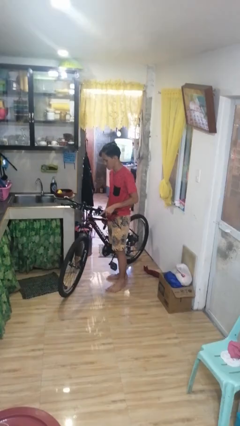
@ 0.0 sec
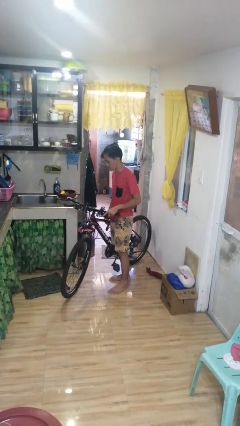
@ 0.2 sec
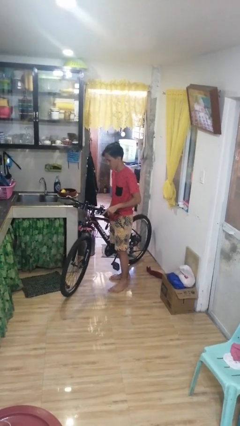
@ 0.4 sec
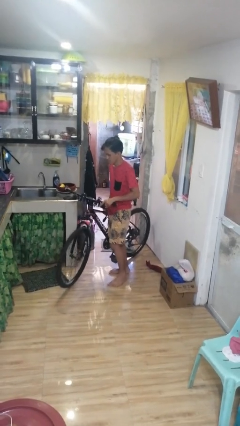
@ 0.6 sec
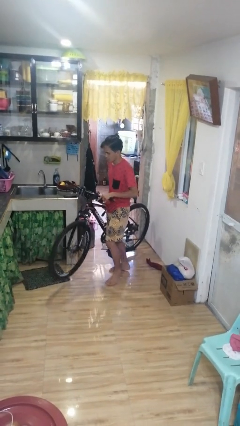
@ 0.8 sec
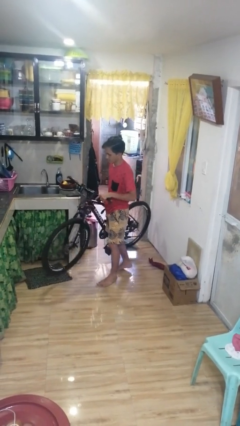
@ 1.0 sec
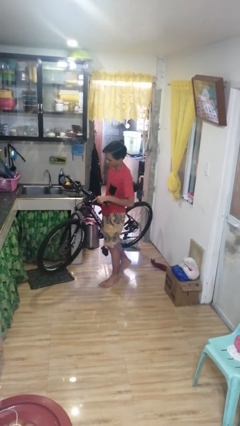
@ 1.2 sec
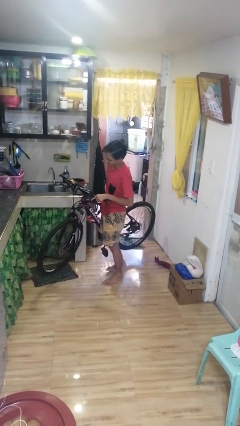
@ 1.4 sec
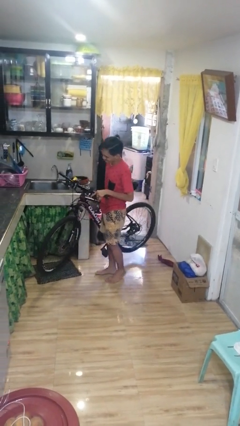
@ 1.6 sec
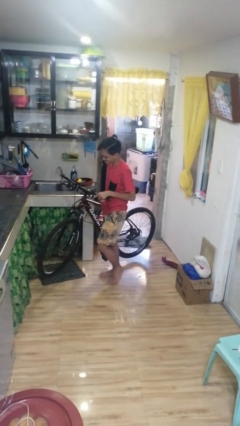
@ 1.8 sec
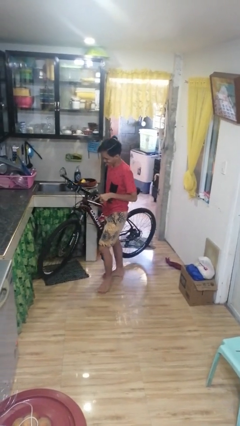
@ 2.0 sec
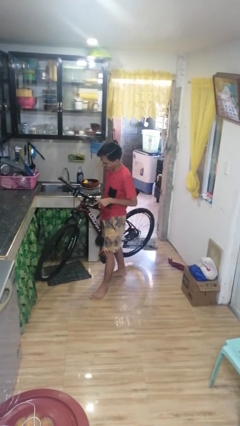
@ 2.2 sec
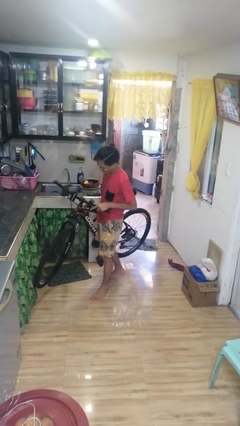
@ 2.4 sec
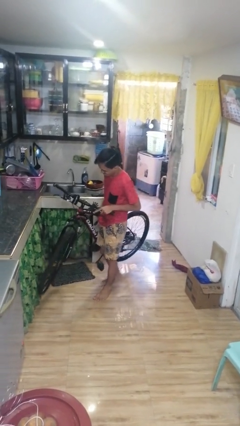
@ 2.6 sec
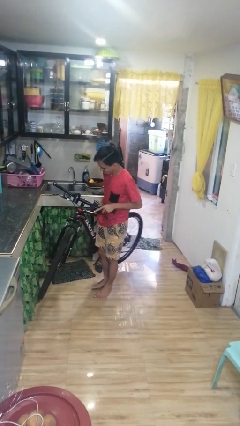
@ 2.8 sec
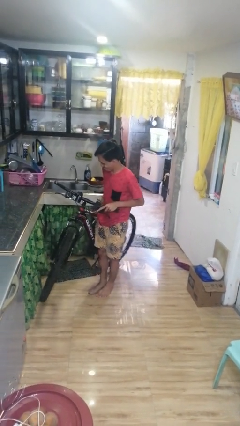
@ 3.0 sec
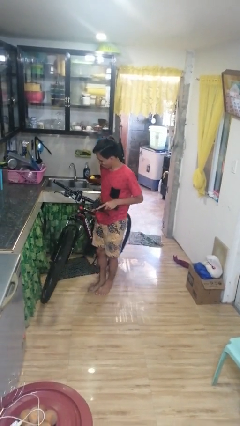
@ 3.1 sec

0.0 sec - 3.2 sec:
person carries bicycle

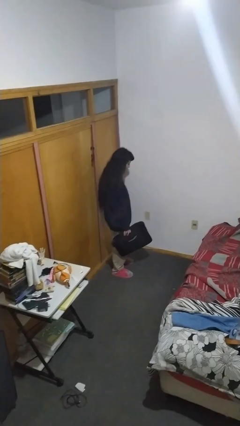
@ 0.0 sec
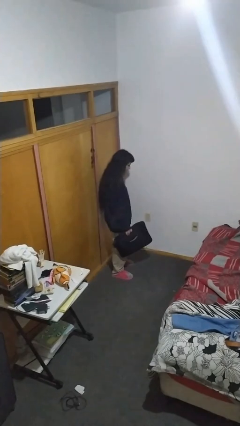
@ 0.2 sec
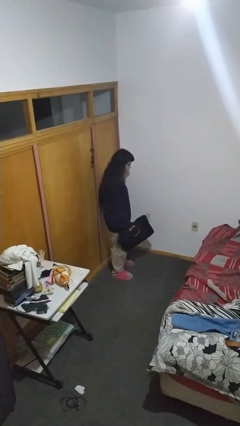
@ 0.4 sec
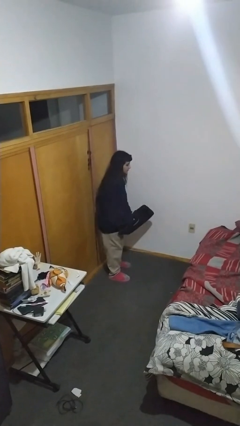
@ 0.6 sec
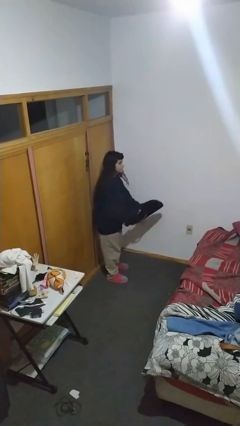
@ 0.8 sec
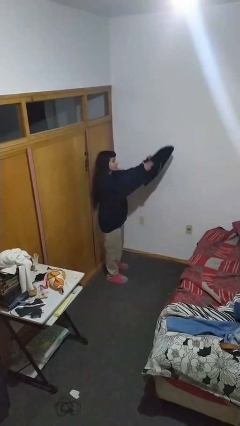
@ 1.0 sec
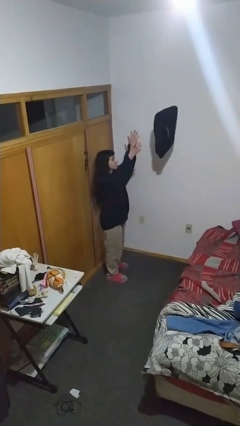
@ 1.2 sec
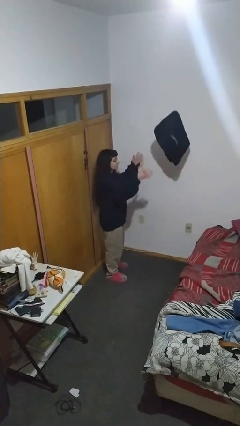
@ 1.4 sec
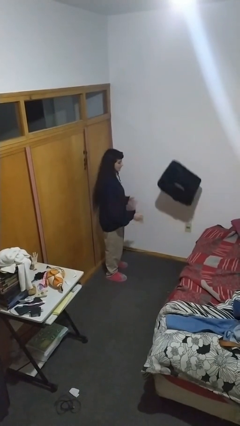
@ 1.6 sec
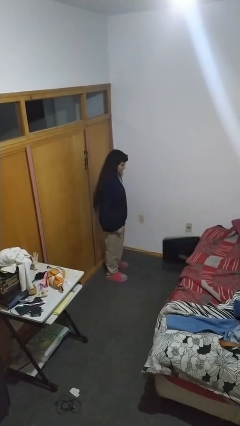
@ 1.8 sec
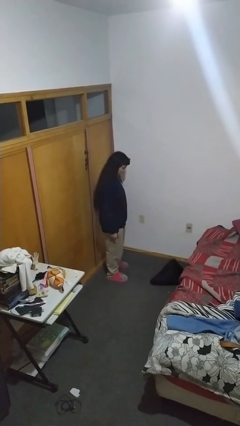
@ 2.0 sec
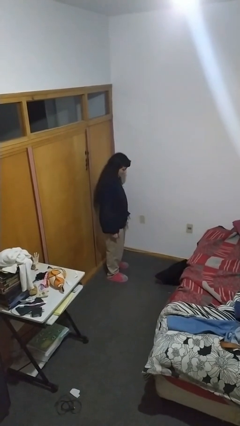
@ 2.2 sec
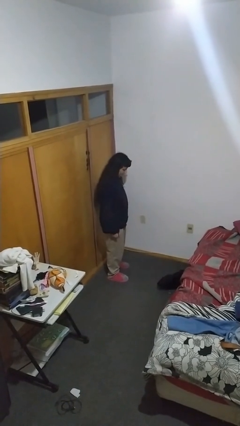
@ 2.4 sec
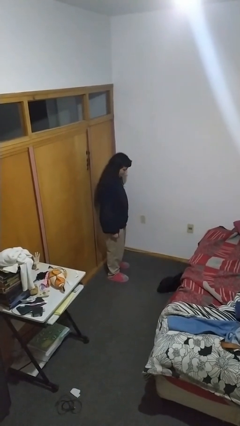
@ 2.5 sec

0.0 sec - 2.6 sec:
person throws object into air

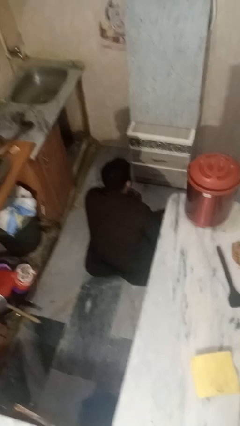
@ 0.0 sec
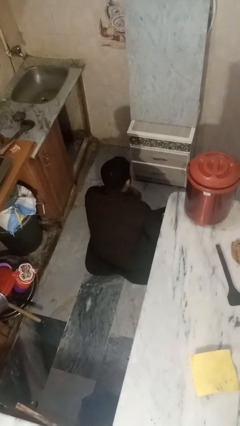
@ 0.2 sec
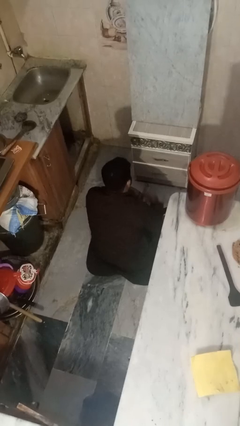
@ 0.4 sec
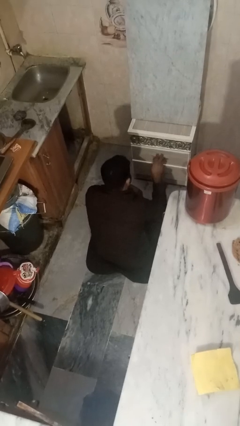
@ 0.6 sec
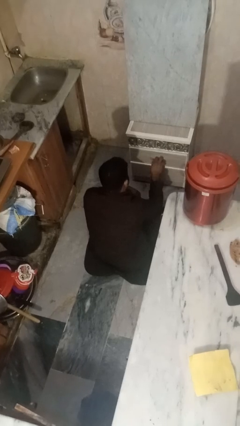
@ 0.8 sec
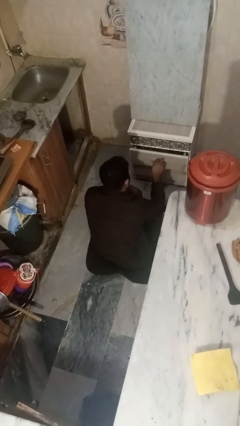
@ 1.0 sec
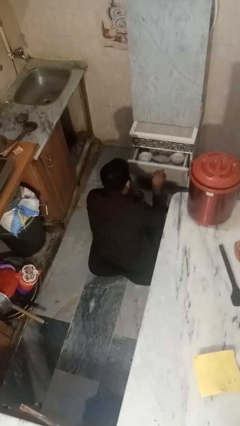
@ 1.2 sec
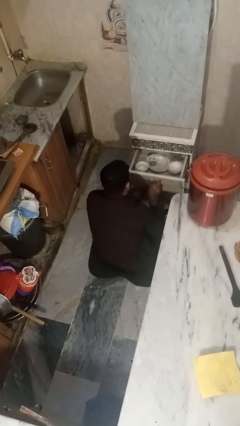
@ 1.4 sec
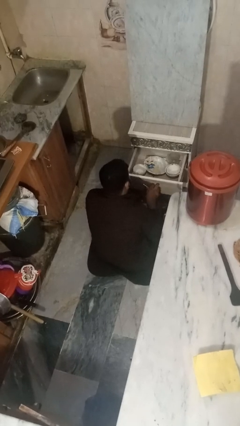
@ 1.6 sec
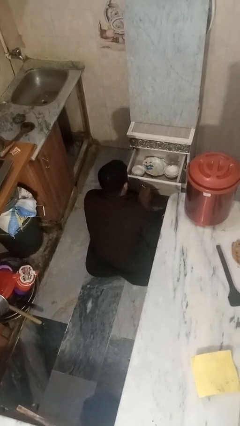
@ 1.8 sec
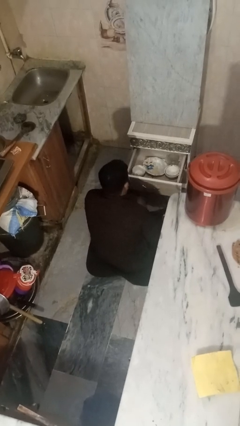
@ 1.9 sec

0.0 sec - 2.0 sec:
person opens kitchen drawer

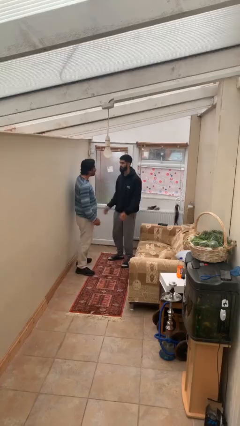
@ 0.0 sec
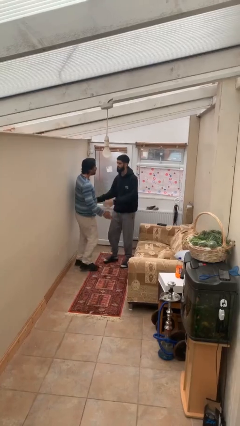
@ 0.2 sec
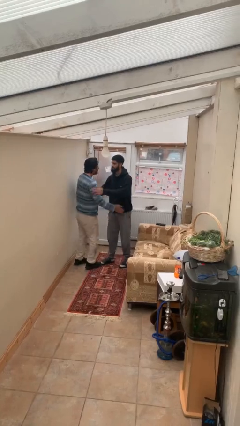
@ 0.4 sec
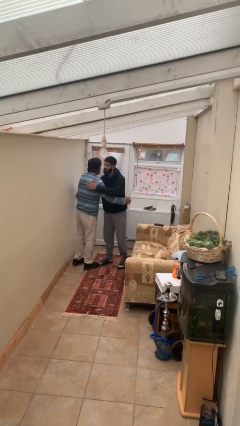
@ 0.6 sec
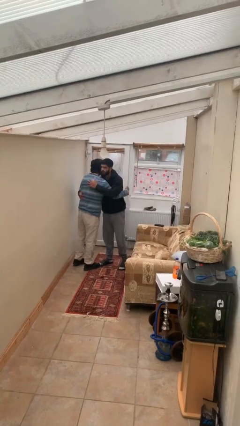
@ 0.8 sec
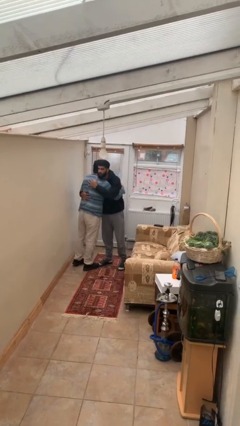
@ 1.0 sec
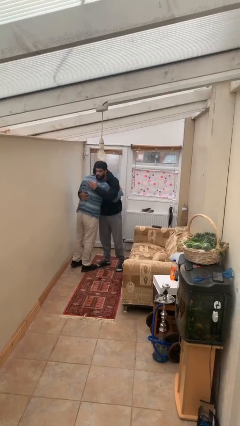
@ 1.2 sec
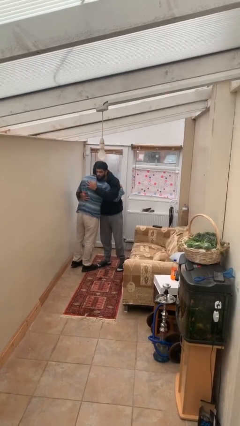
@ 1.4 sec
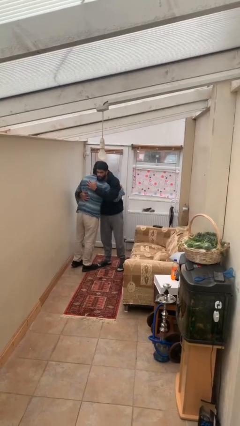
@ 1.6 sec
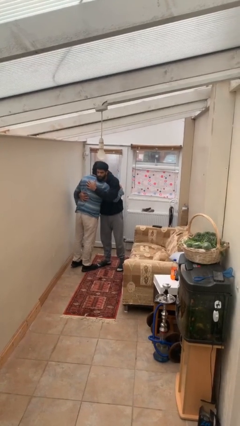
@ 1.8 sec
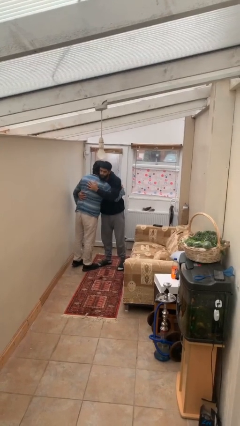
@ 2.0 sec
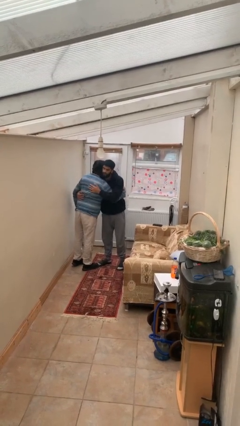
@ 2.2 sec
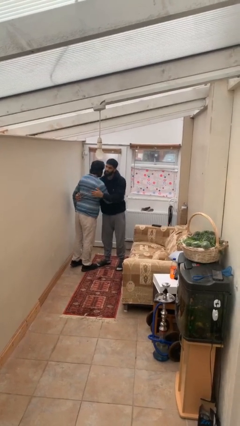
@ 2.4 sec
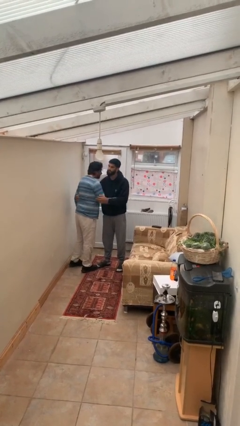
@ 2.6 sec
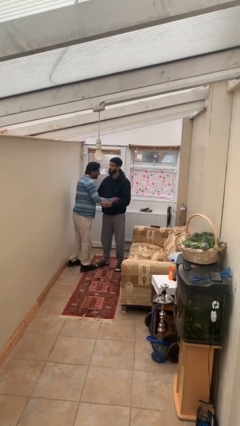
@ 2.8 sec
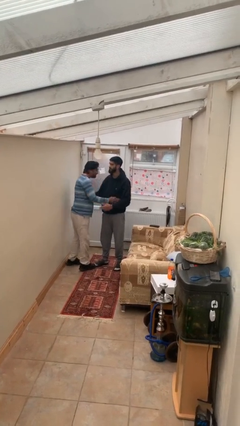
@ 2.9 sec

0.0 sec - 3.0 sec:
person embraces person

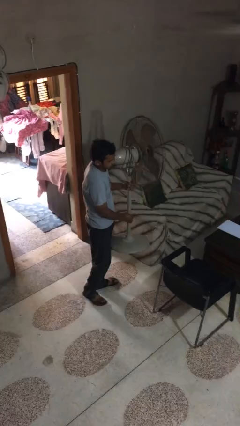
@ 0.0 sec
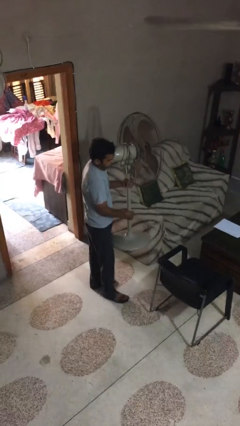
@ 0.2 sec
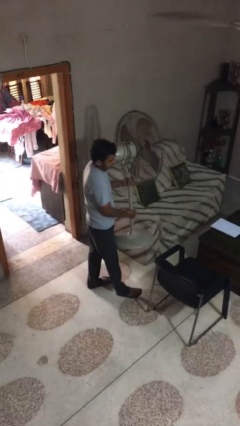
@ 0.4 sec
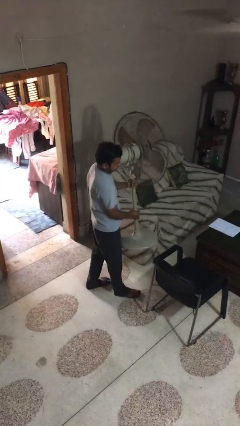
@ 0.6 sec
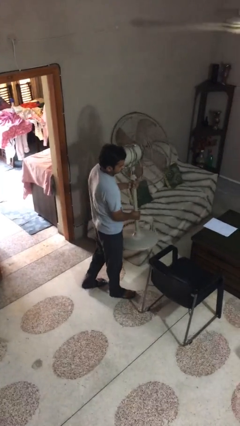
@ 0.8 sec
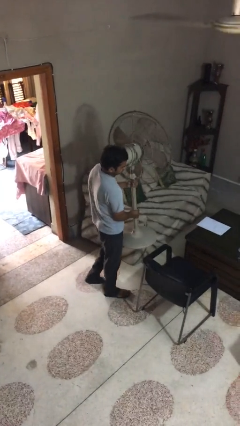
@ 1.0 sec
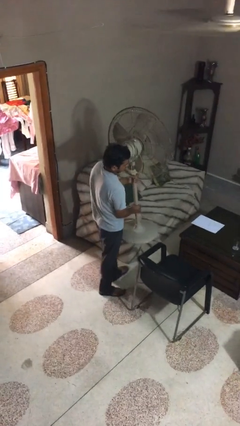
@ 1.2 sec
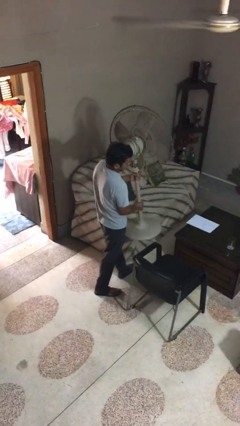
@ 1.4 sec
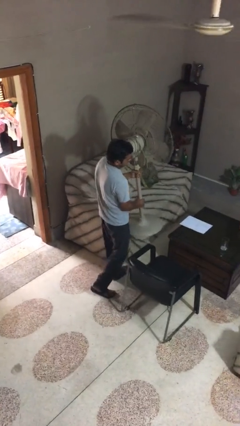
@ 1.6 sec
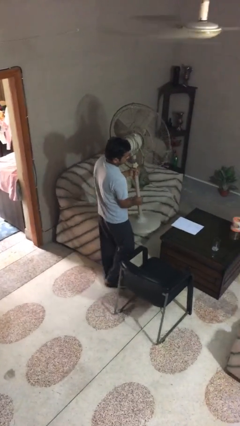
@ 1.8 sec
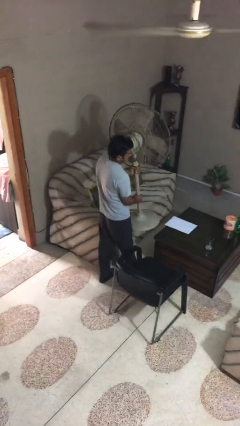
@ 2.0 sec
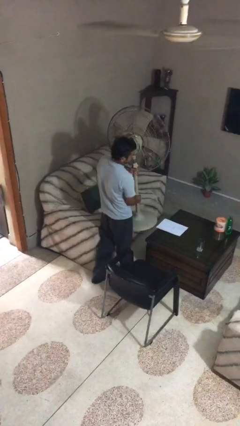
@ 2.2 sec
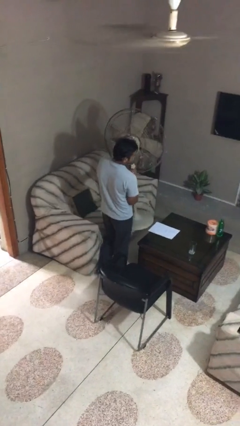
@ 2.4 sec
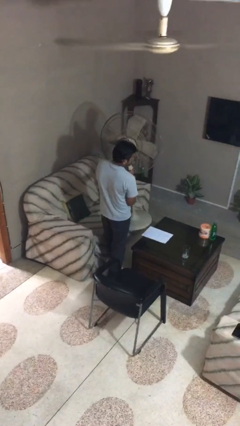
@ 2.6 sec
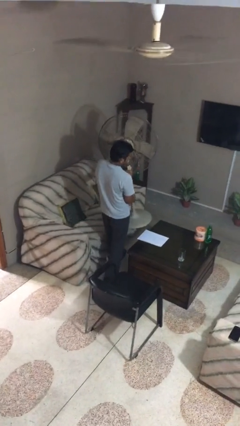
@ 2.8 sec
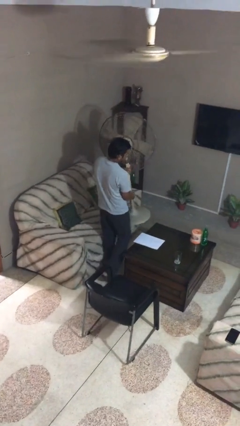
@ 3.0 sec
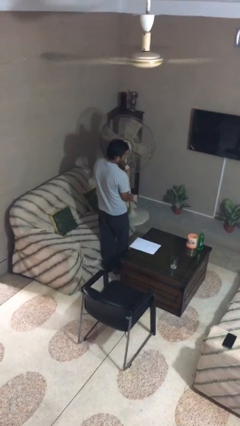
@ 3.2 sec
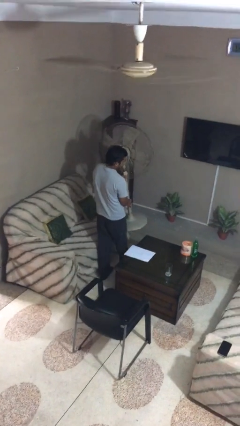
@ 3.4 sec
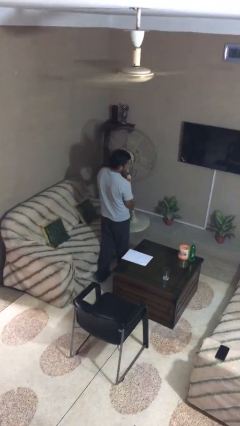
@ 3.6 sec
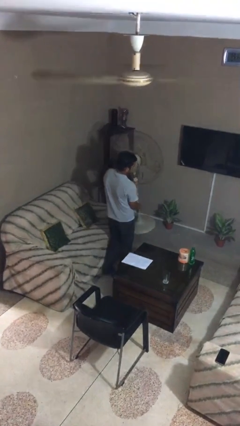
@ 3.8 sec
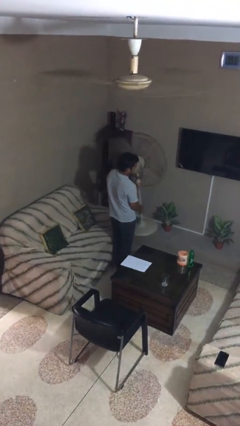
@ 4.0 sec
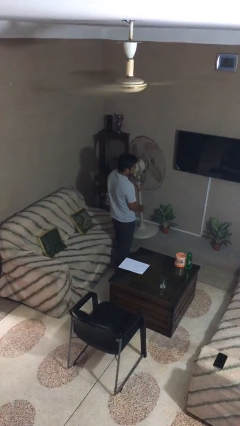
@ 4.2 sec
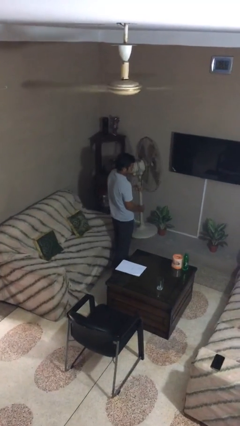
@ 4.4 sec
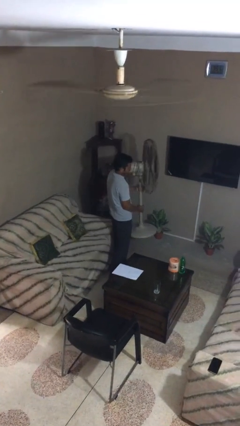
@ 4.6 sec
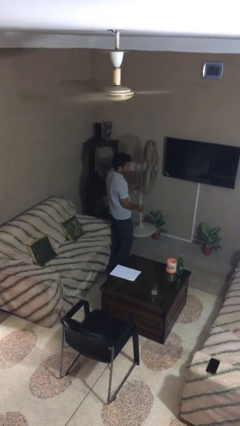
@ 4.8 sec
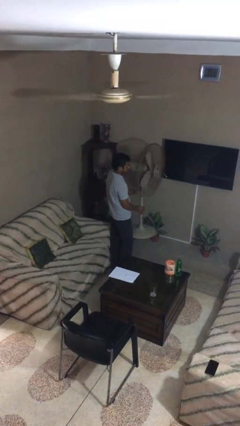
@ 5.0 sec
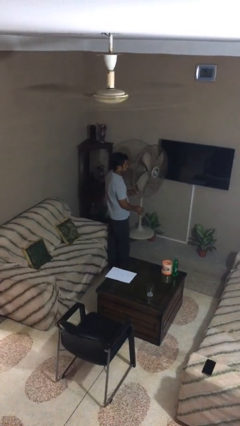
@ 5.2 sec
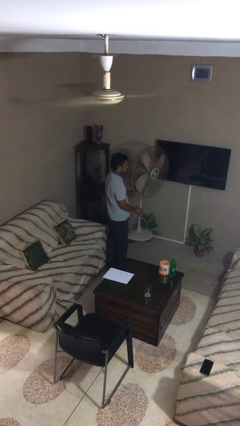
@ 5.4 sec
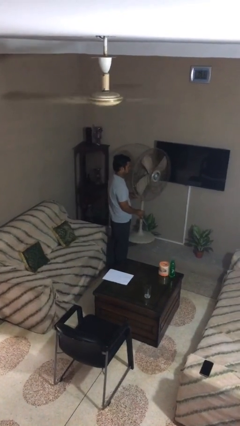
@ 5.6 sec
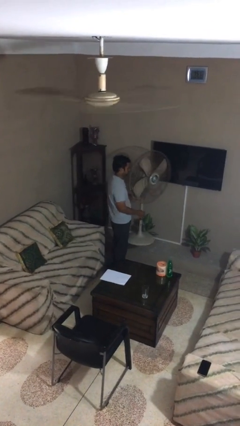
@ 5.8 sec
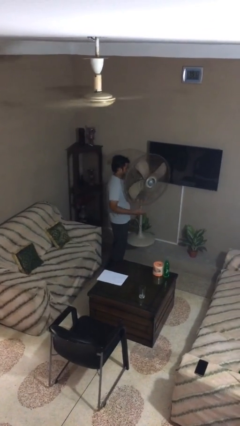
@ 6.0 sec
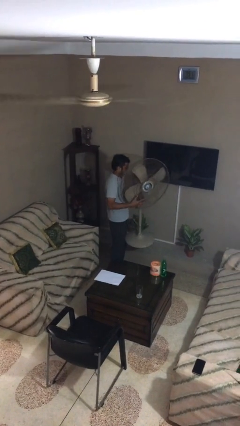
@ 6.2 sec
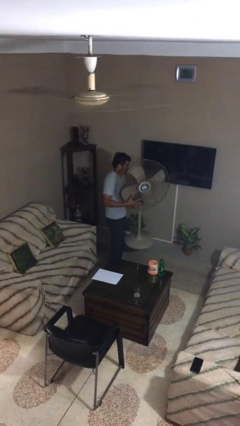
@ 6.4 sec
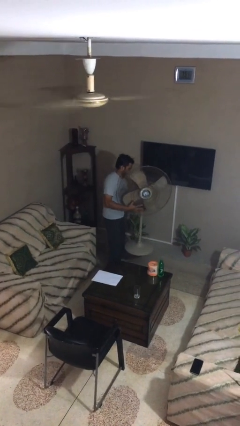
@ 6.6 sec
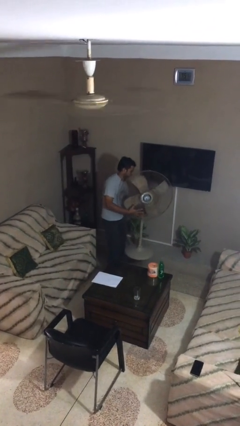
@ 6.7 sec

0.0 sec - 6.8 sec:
person carries heavy object
